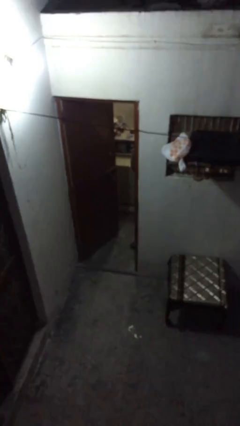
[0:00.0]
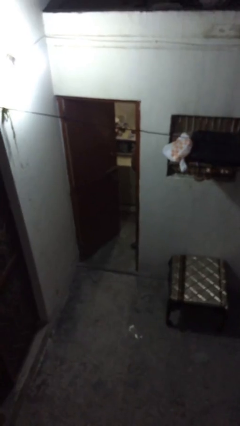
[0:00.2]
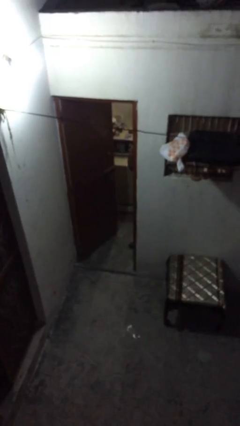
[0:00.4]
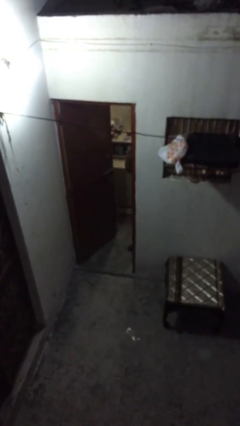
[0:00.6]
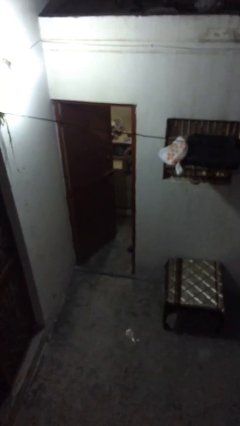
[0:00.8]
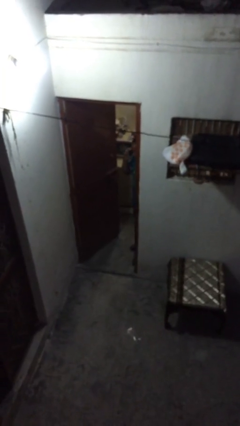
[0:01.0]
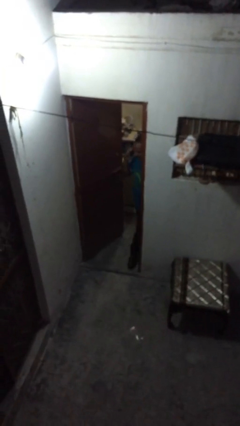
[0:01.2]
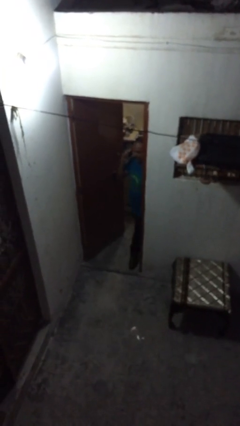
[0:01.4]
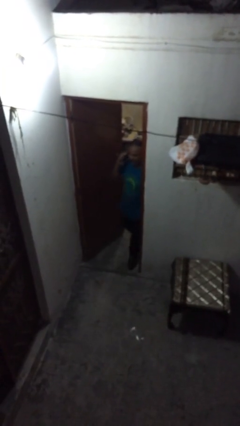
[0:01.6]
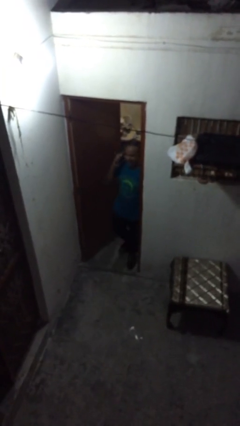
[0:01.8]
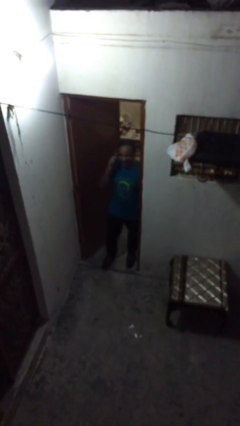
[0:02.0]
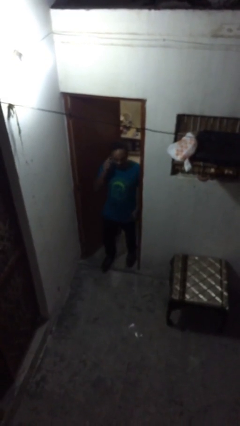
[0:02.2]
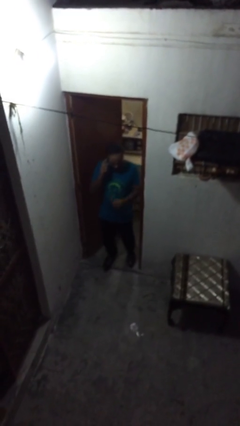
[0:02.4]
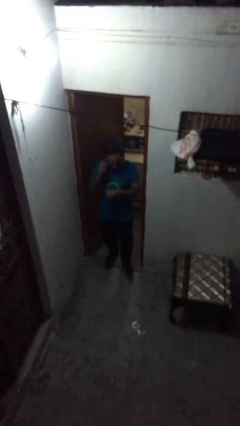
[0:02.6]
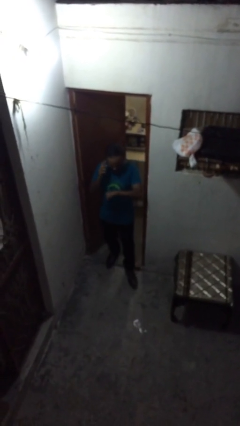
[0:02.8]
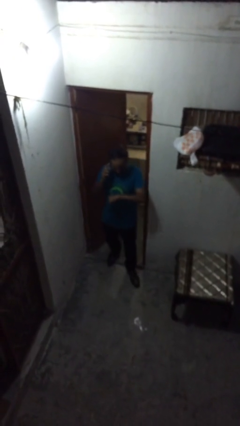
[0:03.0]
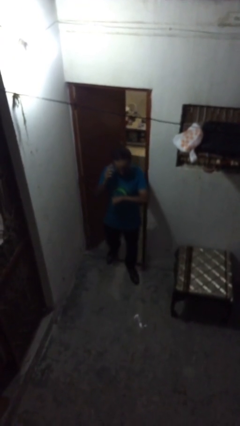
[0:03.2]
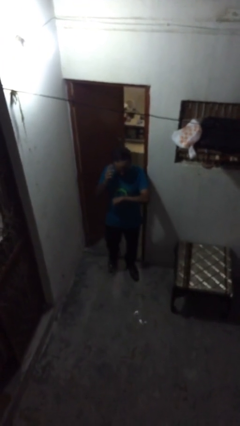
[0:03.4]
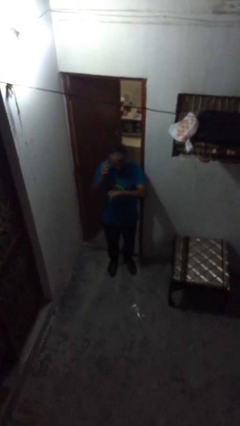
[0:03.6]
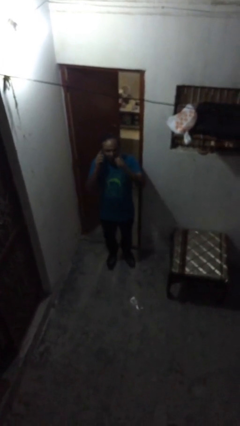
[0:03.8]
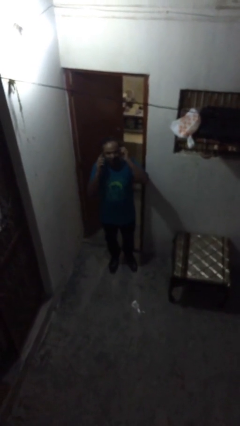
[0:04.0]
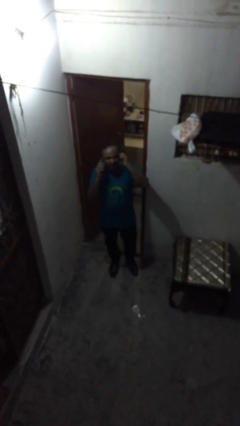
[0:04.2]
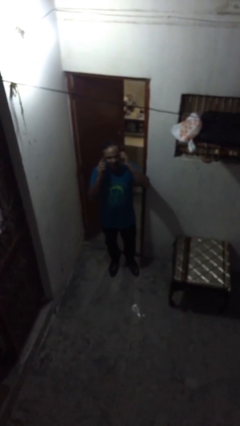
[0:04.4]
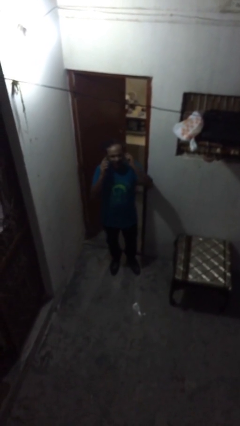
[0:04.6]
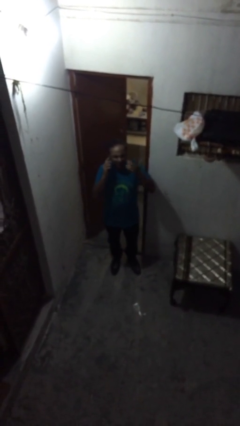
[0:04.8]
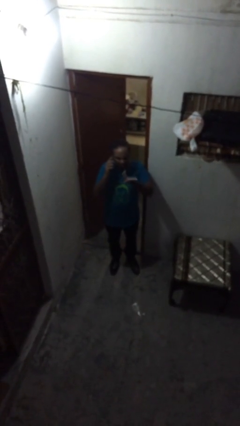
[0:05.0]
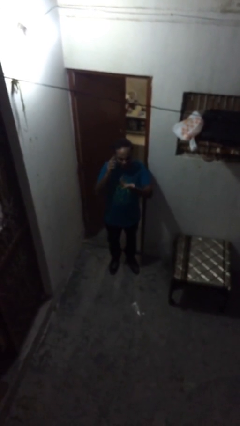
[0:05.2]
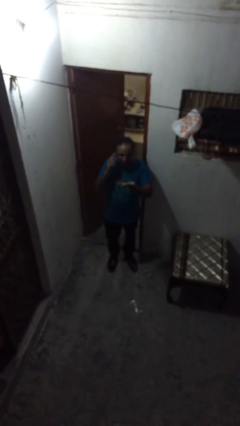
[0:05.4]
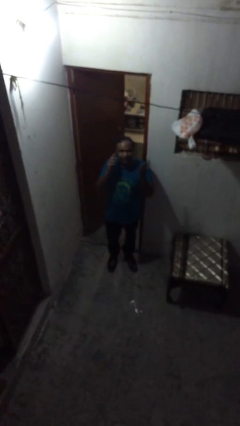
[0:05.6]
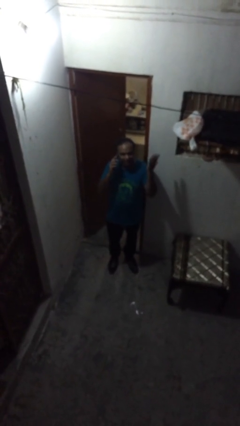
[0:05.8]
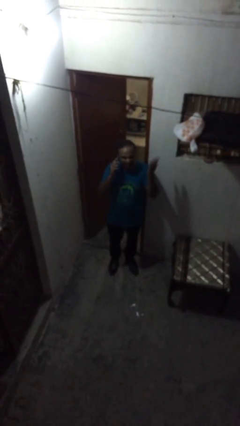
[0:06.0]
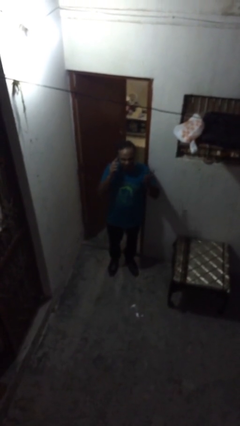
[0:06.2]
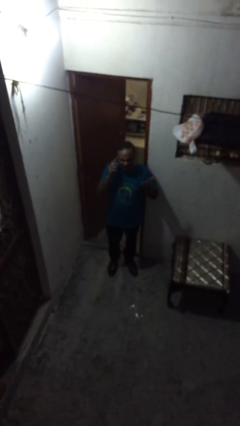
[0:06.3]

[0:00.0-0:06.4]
person enters scene through structure

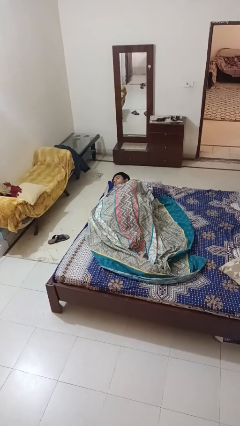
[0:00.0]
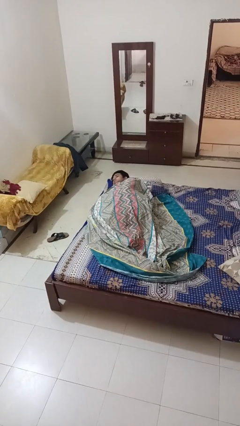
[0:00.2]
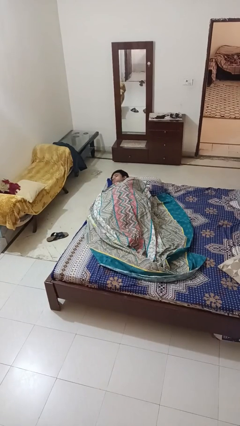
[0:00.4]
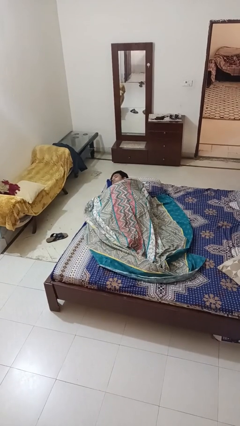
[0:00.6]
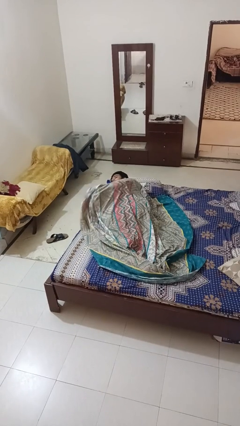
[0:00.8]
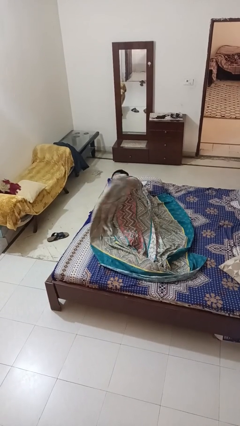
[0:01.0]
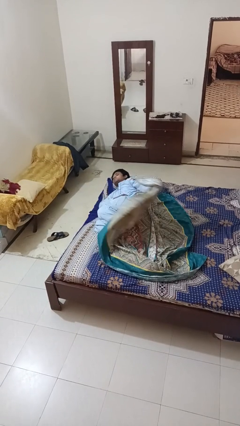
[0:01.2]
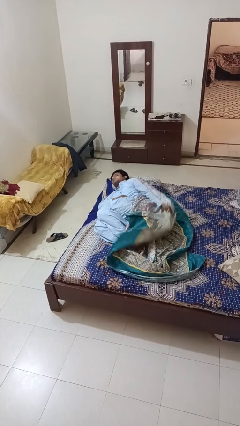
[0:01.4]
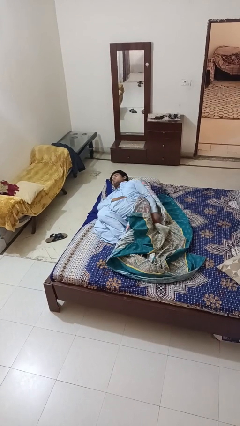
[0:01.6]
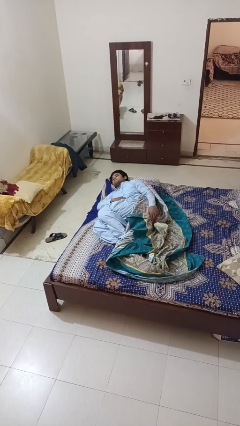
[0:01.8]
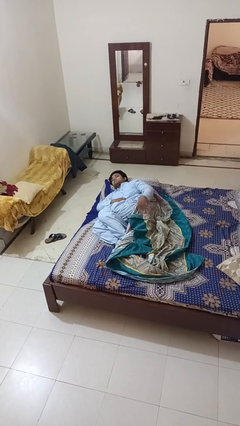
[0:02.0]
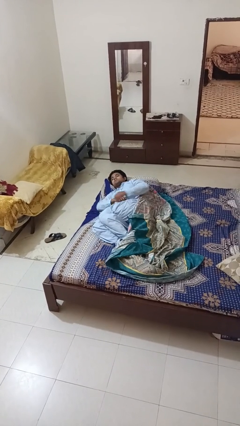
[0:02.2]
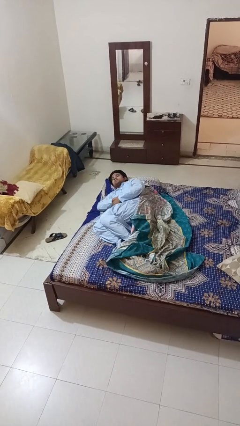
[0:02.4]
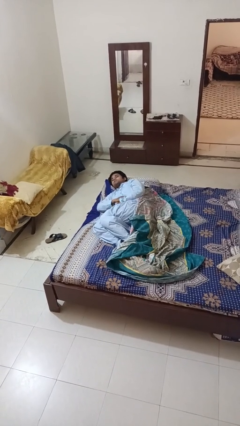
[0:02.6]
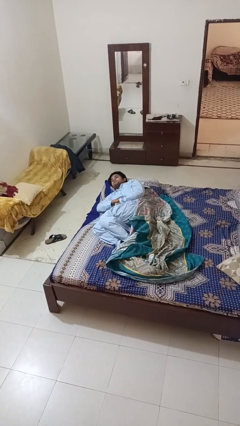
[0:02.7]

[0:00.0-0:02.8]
person uncovers with bedsheets

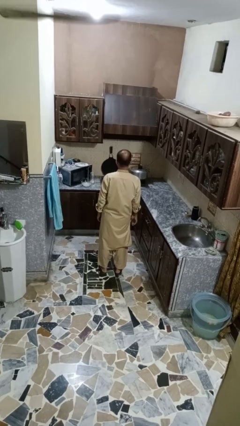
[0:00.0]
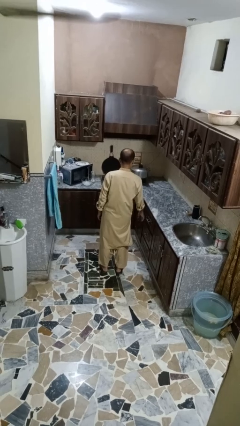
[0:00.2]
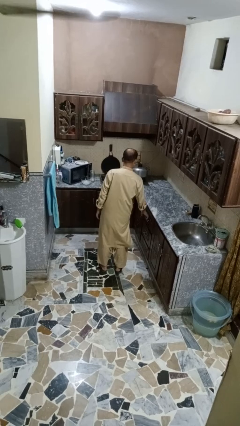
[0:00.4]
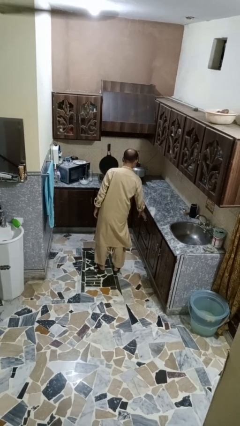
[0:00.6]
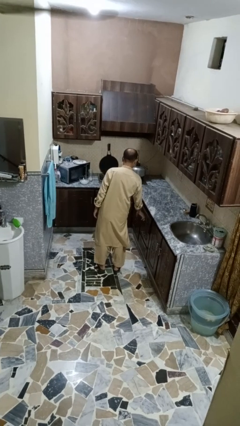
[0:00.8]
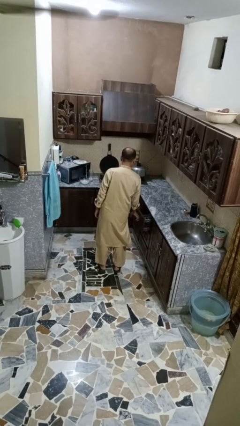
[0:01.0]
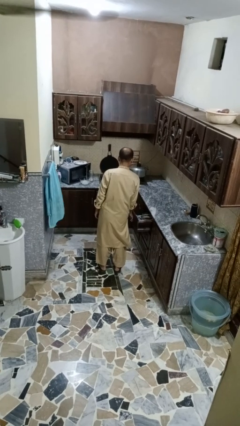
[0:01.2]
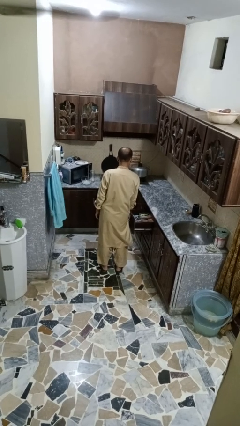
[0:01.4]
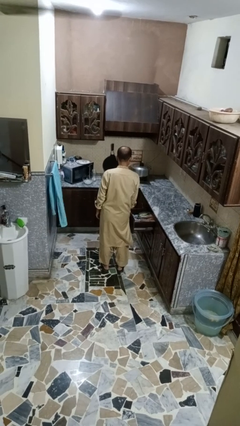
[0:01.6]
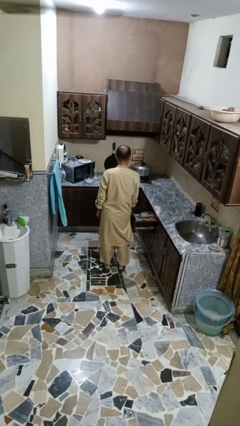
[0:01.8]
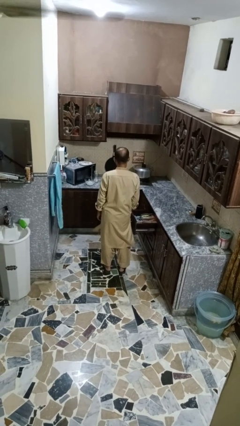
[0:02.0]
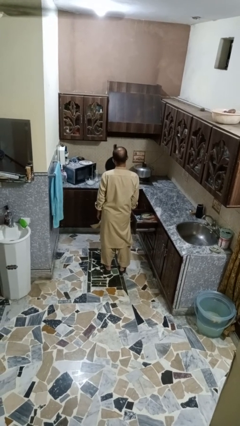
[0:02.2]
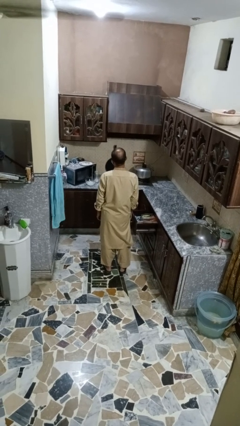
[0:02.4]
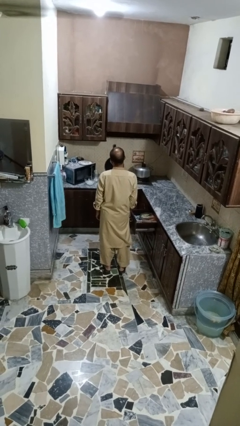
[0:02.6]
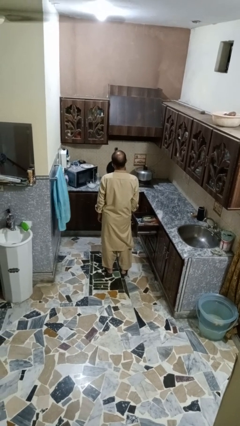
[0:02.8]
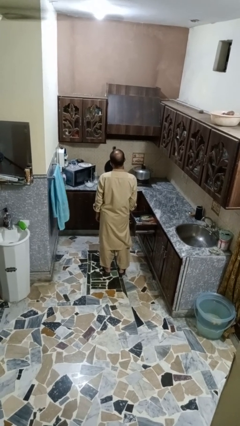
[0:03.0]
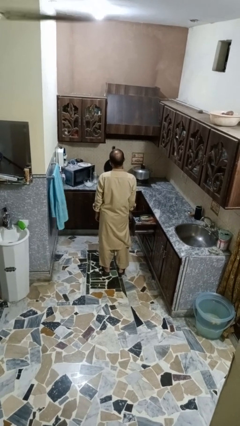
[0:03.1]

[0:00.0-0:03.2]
person opens kitchen drawer

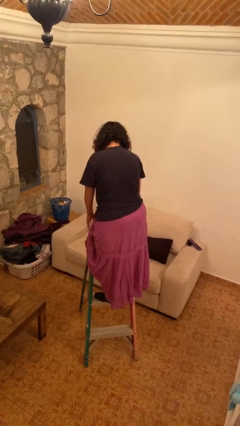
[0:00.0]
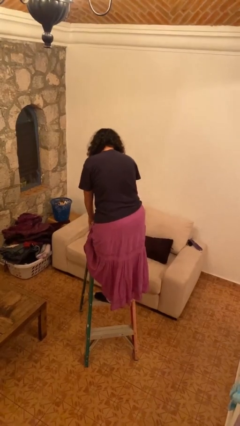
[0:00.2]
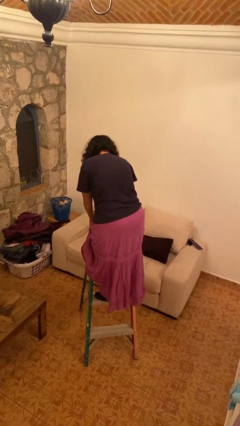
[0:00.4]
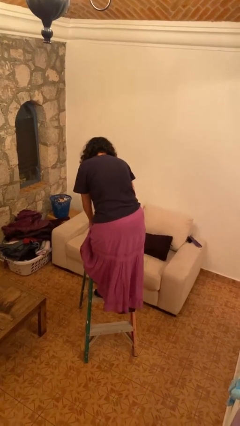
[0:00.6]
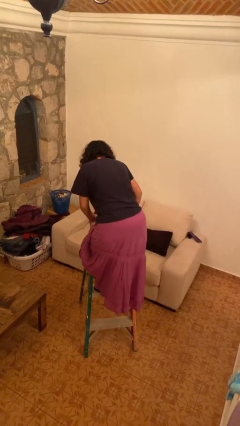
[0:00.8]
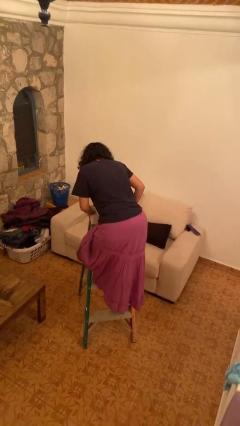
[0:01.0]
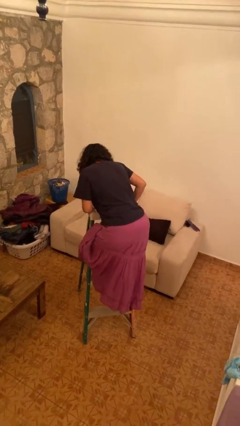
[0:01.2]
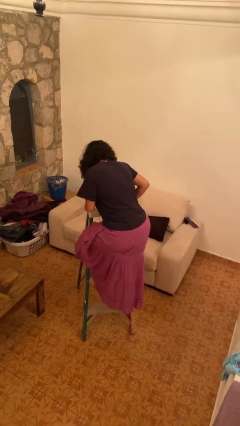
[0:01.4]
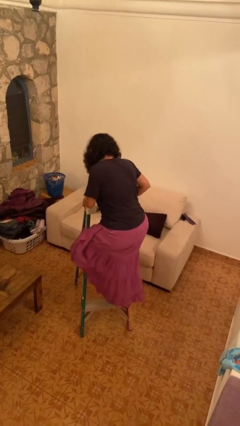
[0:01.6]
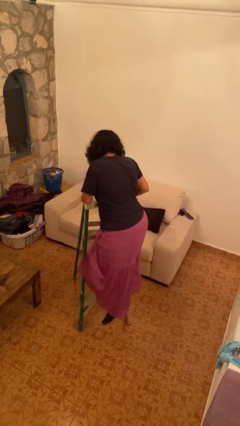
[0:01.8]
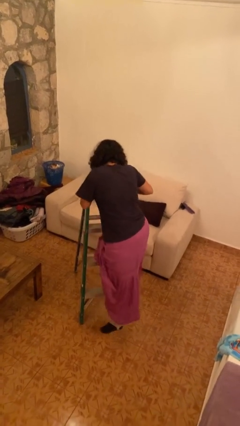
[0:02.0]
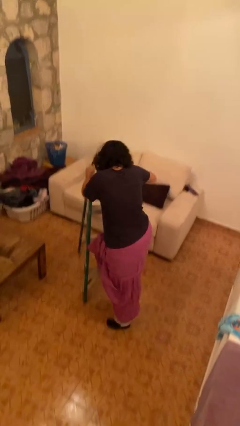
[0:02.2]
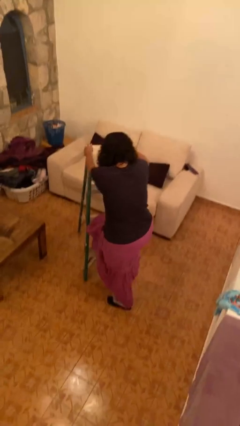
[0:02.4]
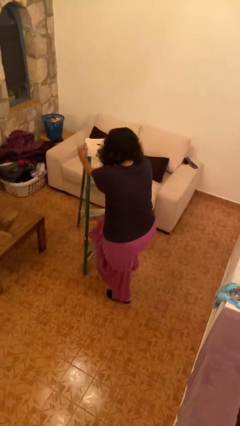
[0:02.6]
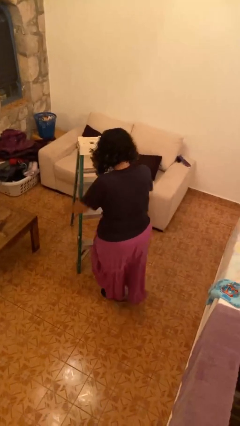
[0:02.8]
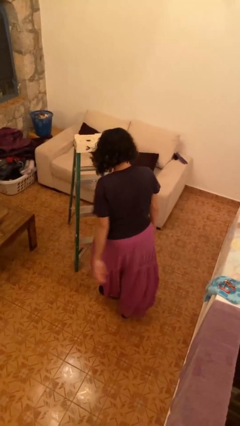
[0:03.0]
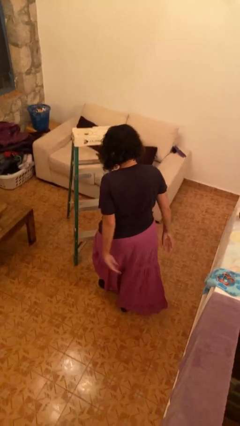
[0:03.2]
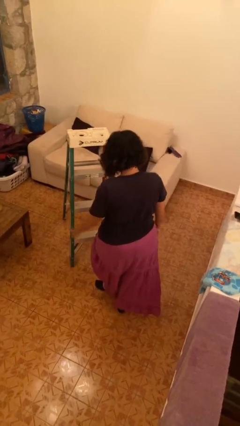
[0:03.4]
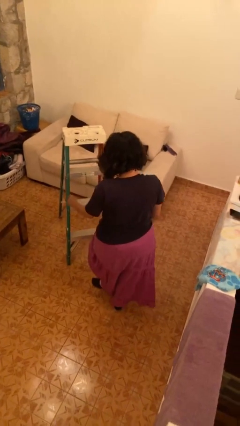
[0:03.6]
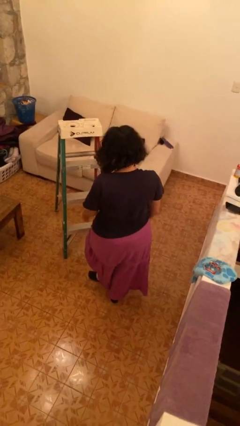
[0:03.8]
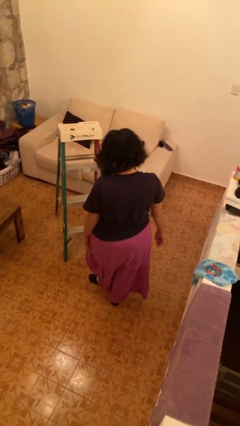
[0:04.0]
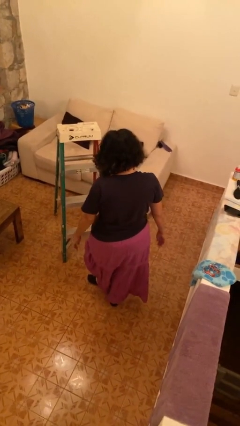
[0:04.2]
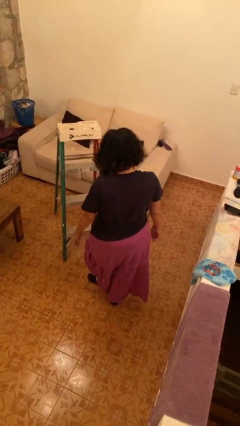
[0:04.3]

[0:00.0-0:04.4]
person climbs down ladder

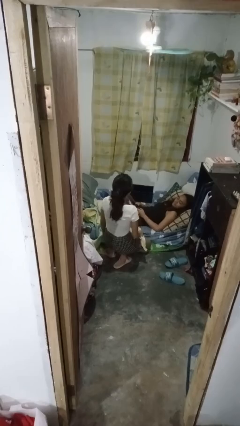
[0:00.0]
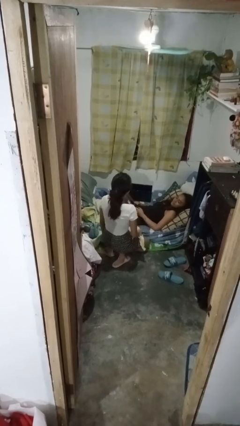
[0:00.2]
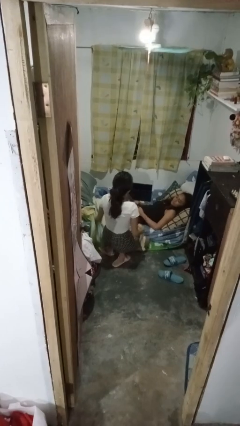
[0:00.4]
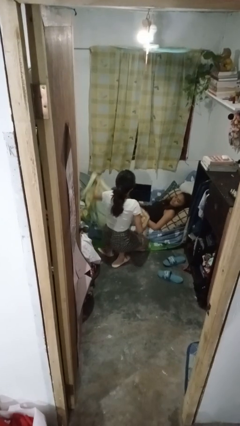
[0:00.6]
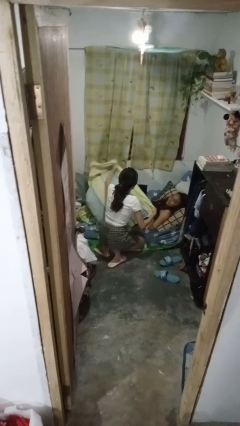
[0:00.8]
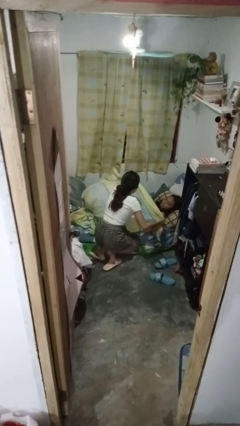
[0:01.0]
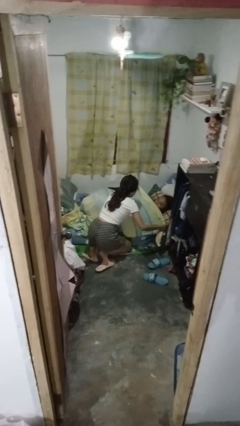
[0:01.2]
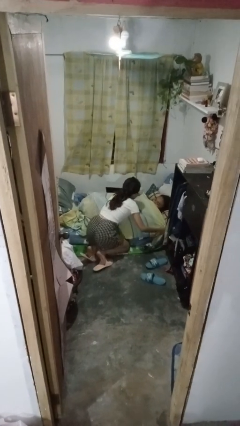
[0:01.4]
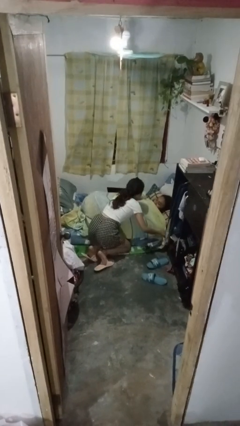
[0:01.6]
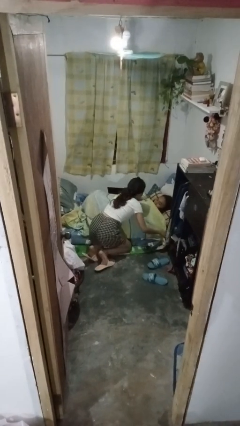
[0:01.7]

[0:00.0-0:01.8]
person covers friend with blanket
